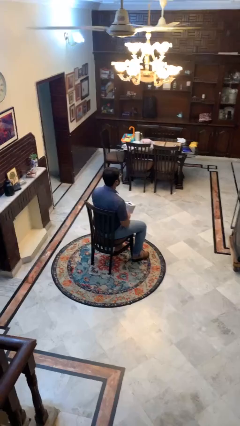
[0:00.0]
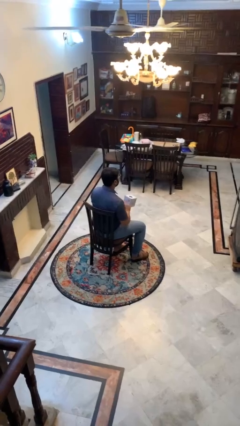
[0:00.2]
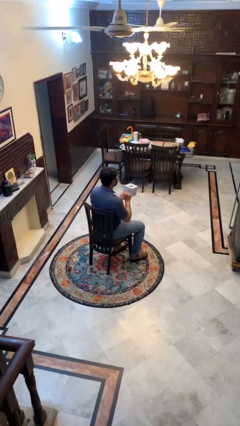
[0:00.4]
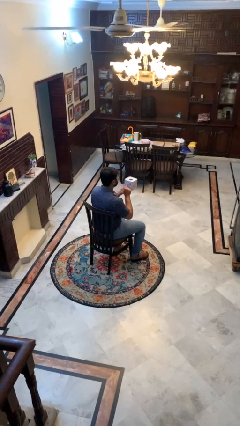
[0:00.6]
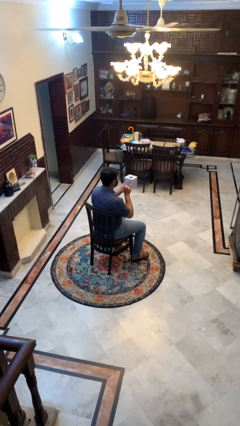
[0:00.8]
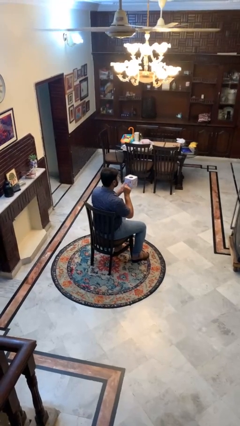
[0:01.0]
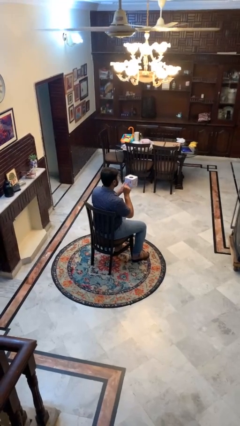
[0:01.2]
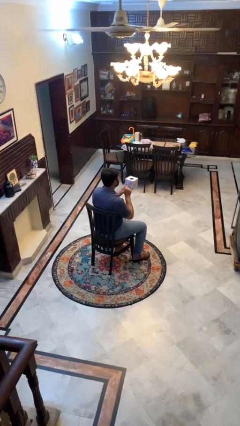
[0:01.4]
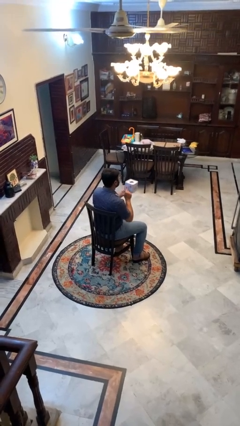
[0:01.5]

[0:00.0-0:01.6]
person taps object with finger

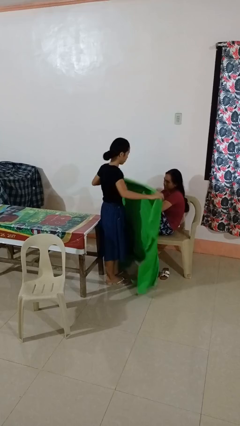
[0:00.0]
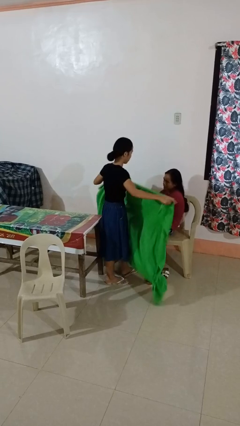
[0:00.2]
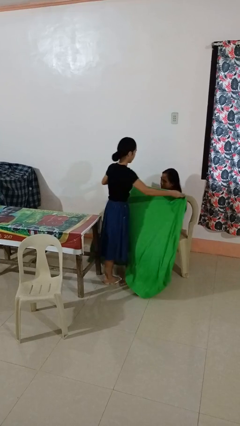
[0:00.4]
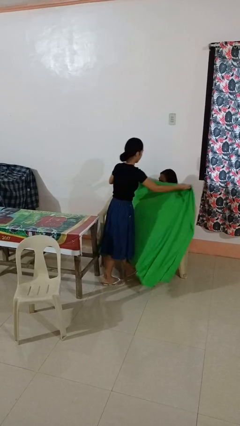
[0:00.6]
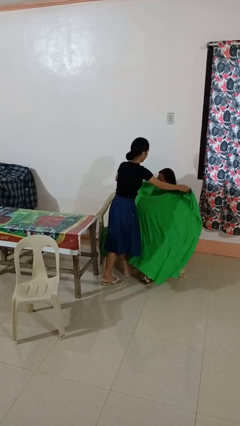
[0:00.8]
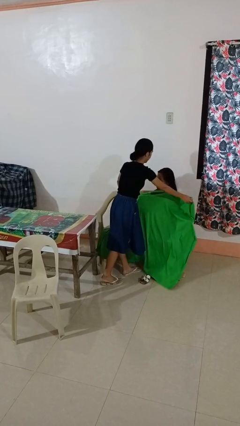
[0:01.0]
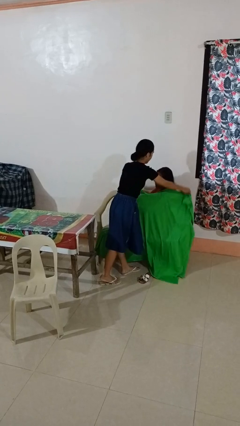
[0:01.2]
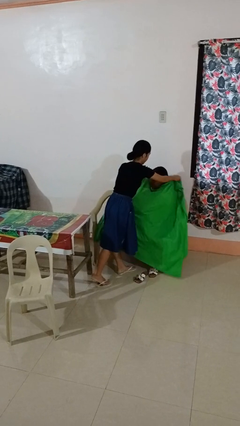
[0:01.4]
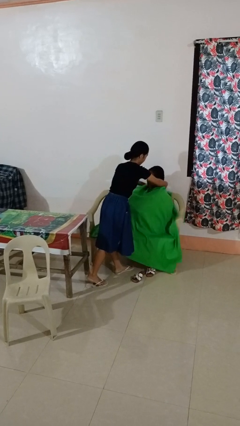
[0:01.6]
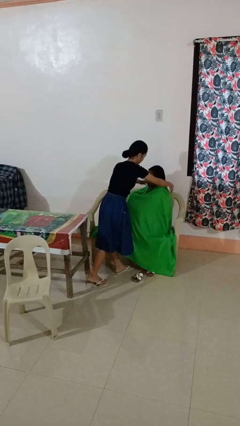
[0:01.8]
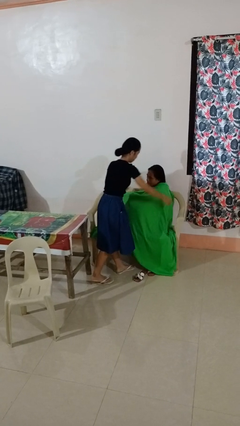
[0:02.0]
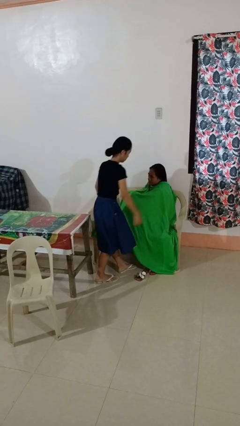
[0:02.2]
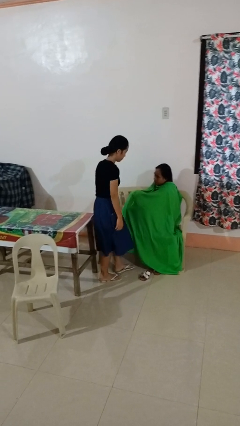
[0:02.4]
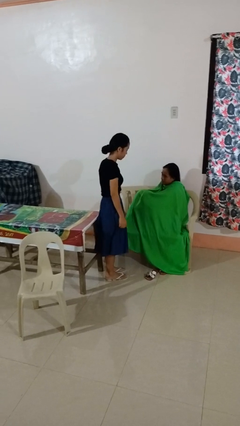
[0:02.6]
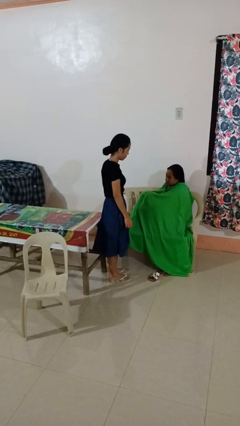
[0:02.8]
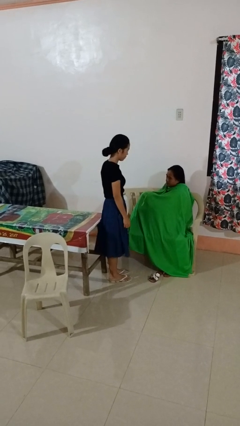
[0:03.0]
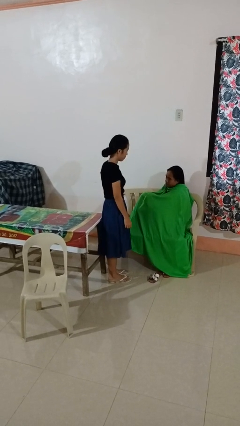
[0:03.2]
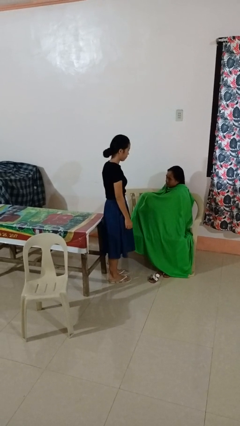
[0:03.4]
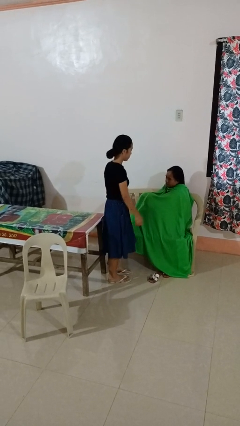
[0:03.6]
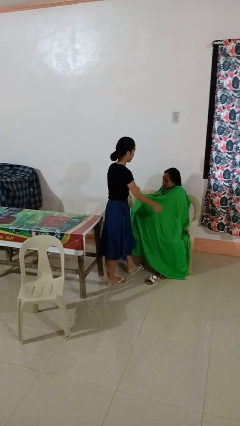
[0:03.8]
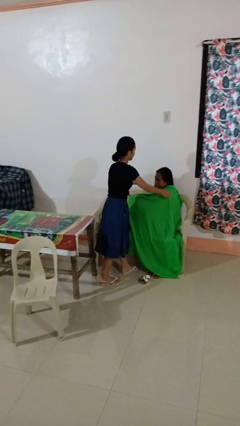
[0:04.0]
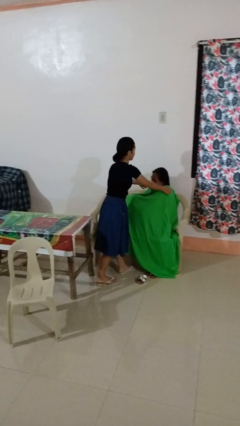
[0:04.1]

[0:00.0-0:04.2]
person covers friend with blanket

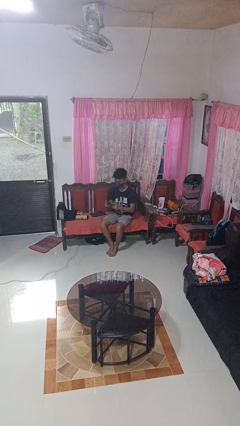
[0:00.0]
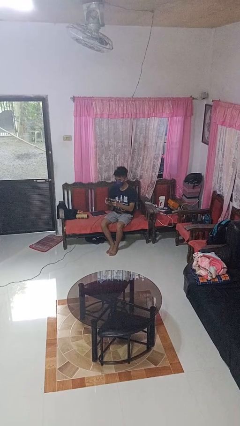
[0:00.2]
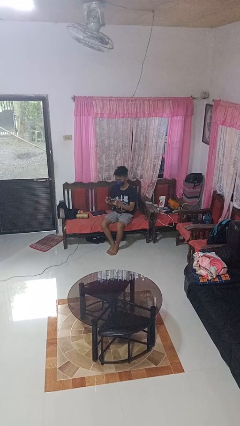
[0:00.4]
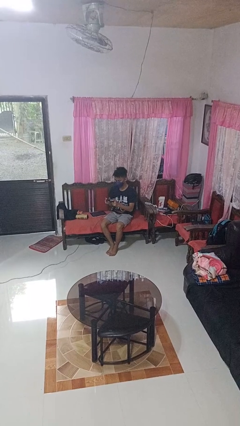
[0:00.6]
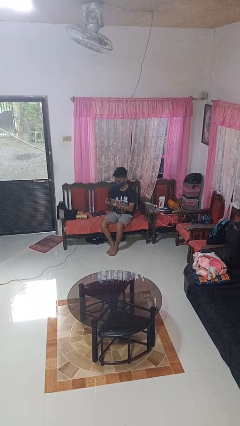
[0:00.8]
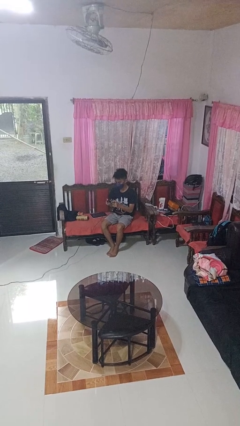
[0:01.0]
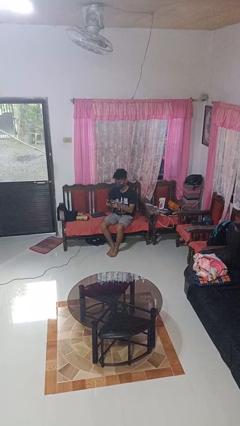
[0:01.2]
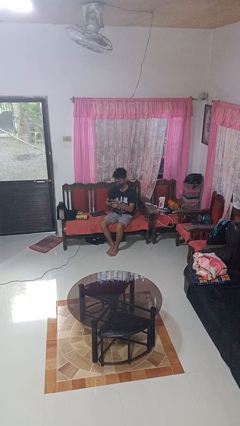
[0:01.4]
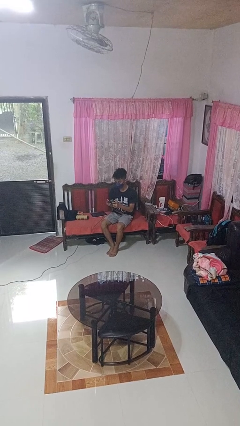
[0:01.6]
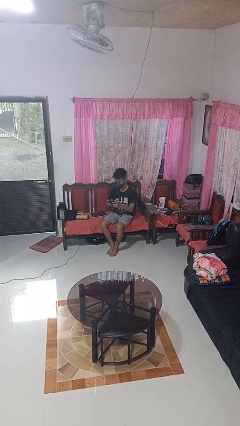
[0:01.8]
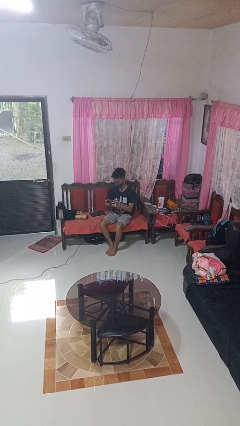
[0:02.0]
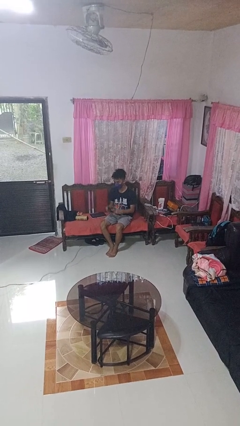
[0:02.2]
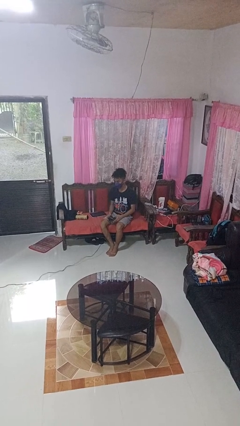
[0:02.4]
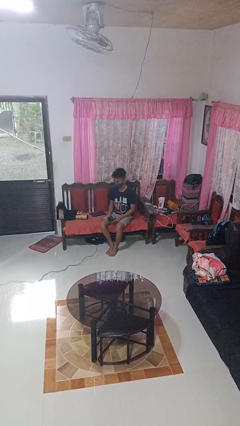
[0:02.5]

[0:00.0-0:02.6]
person interacts with handheld game

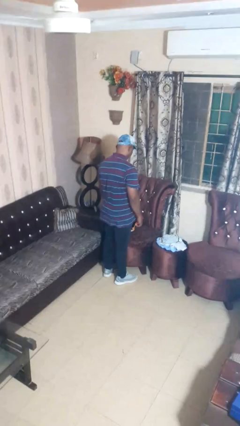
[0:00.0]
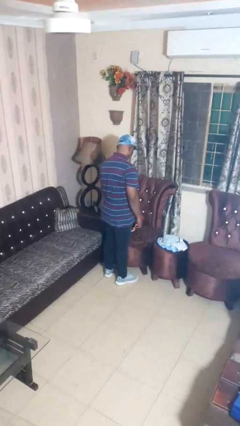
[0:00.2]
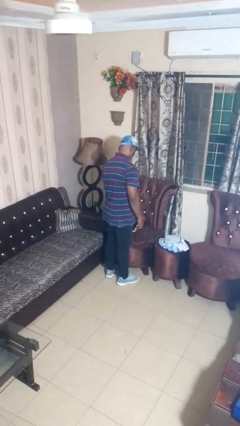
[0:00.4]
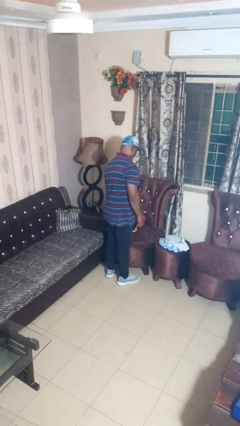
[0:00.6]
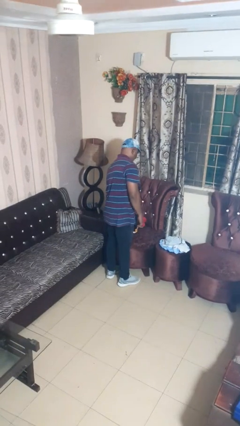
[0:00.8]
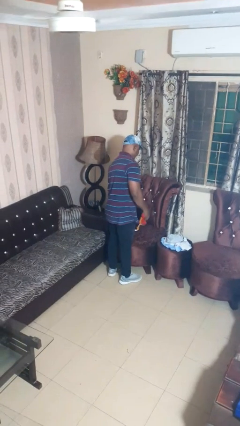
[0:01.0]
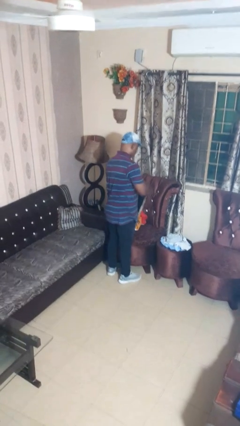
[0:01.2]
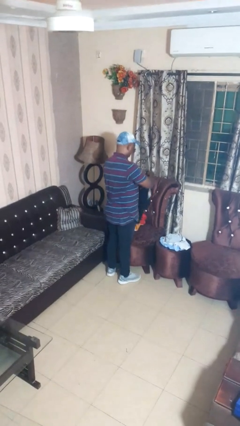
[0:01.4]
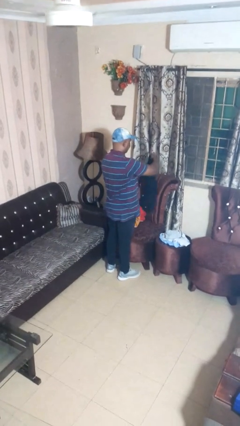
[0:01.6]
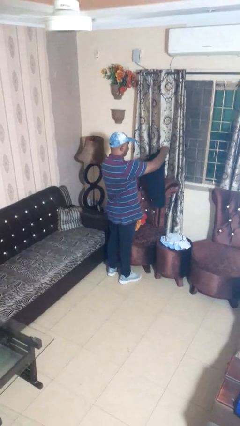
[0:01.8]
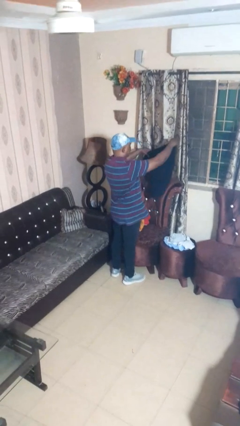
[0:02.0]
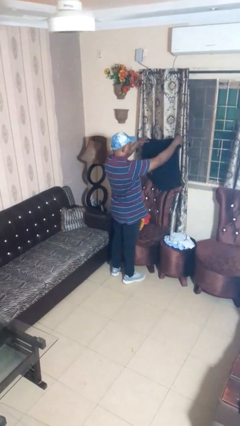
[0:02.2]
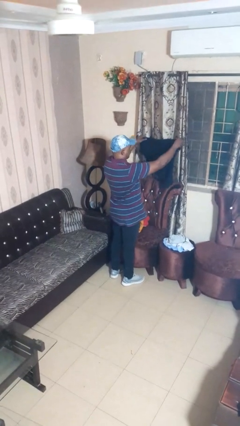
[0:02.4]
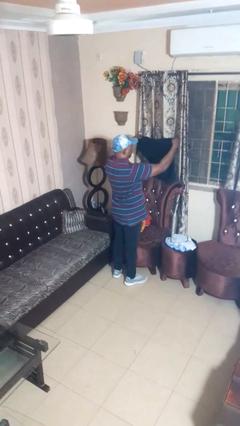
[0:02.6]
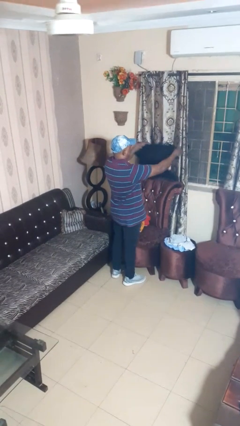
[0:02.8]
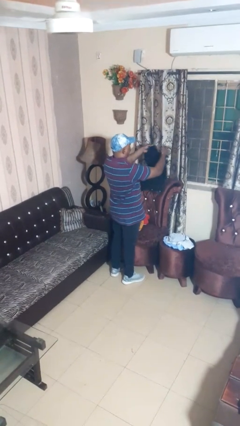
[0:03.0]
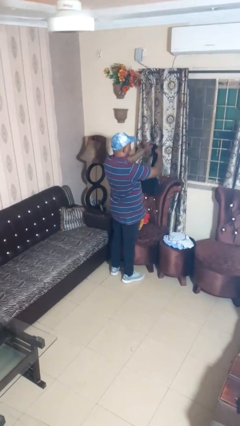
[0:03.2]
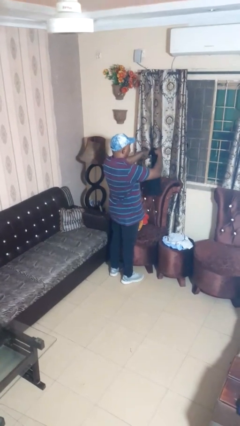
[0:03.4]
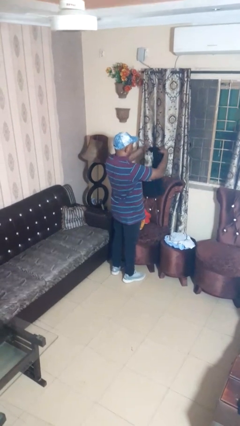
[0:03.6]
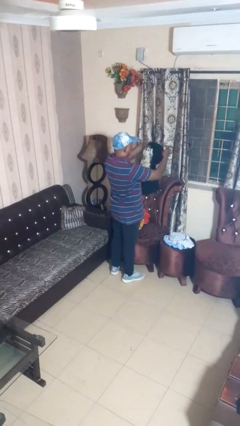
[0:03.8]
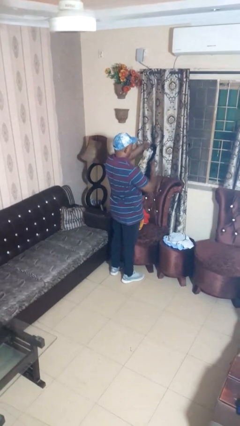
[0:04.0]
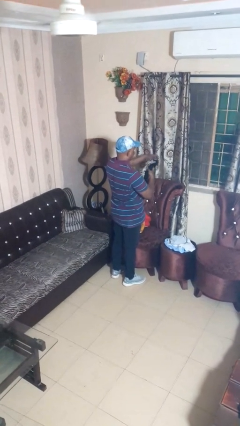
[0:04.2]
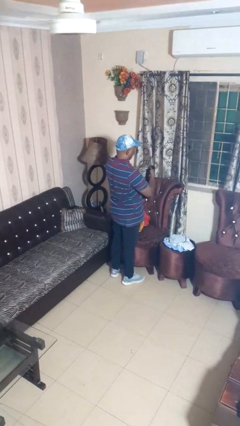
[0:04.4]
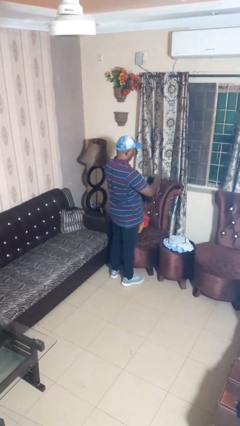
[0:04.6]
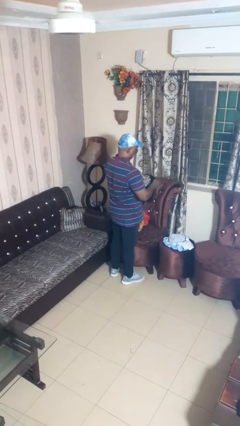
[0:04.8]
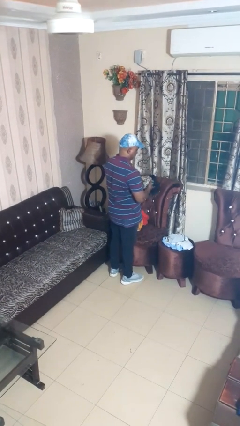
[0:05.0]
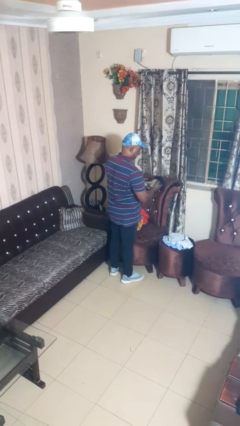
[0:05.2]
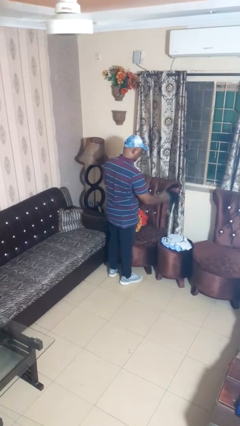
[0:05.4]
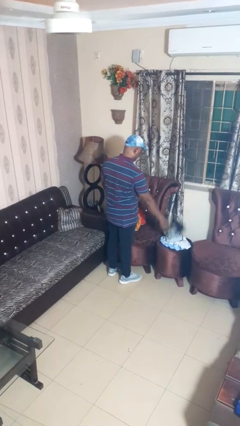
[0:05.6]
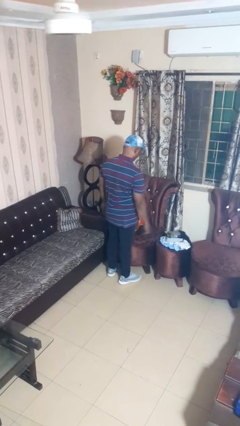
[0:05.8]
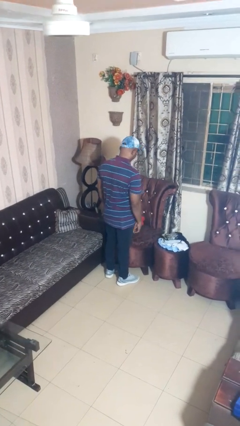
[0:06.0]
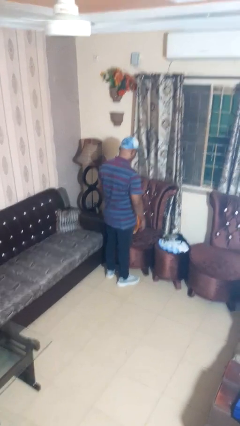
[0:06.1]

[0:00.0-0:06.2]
person folds shirt

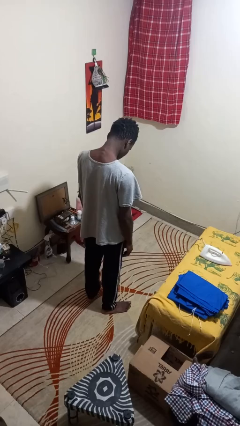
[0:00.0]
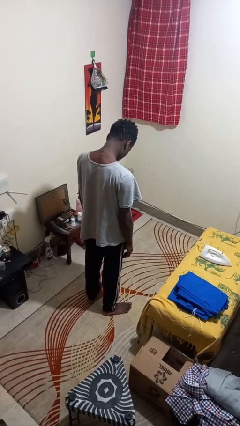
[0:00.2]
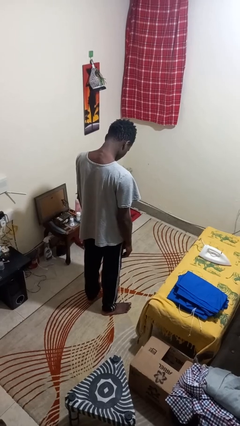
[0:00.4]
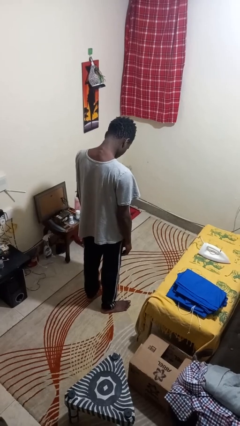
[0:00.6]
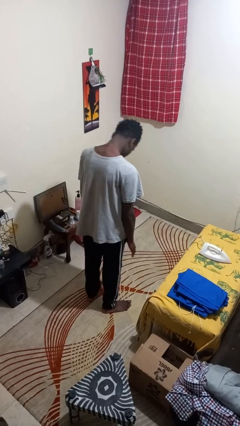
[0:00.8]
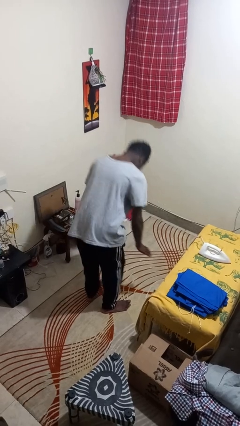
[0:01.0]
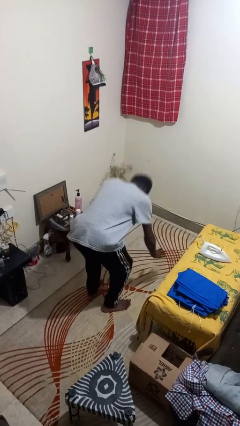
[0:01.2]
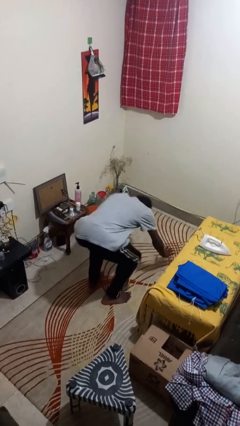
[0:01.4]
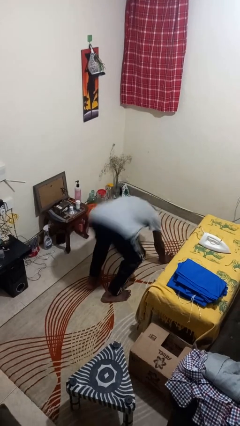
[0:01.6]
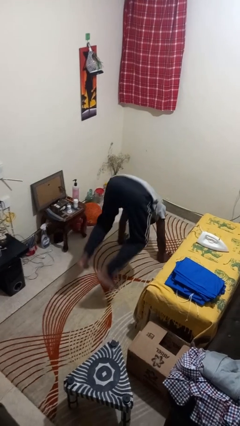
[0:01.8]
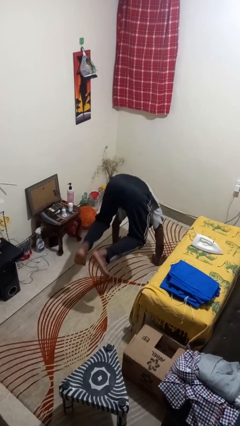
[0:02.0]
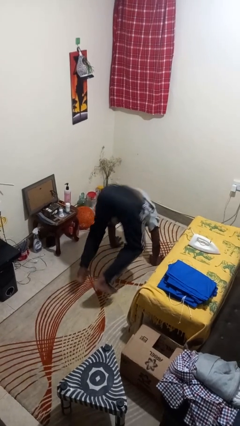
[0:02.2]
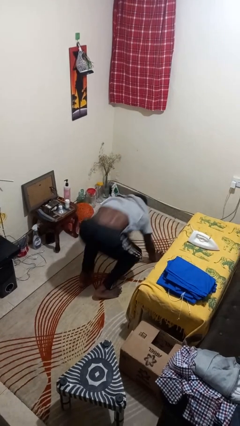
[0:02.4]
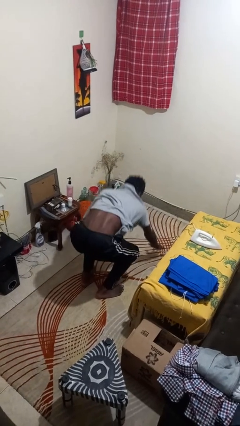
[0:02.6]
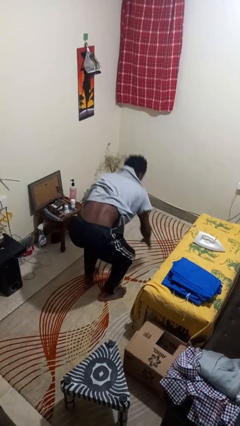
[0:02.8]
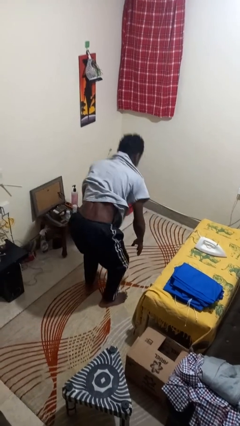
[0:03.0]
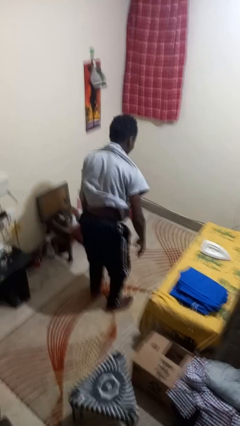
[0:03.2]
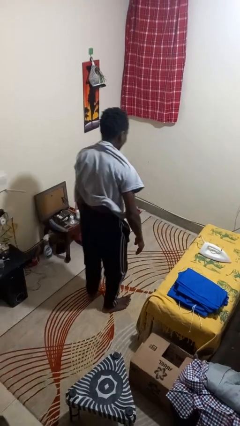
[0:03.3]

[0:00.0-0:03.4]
person handstand
